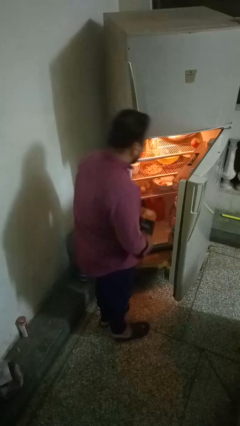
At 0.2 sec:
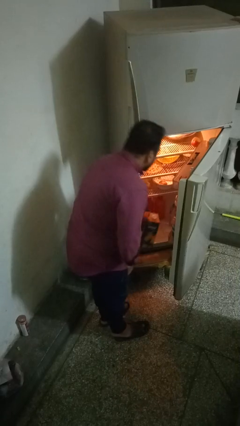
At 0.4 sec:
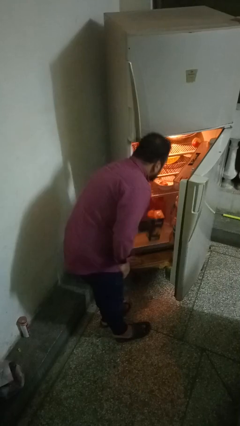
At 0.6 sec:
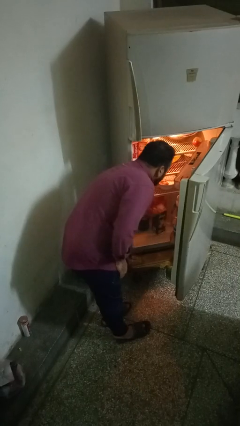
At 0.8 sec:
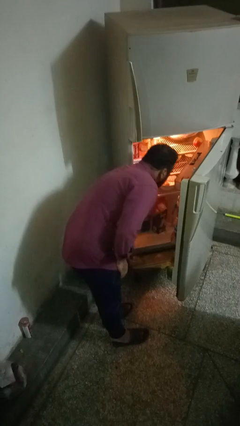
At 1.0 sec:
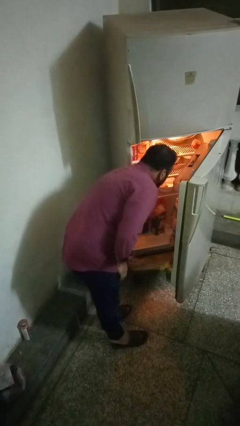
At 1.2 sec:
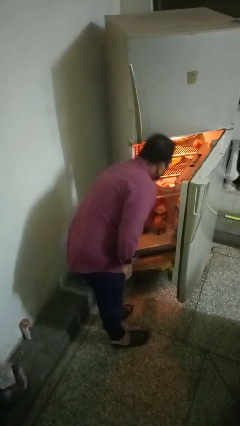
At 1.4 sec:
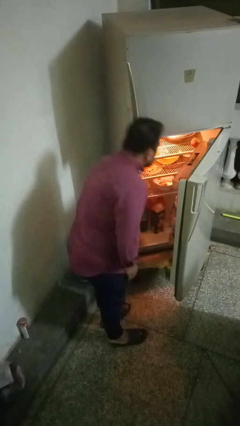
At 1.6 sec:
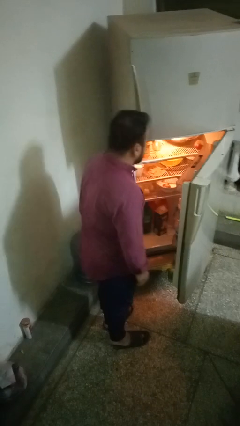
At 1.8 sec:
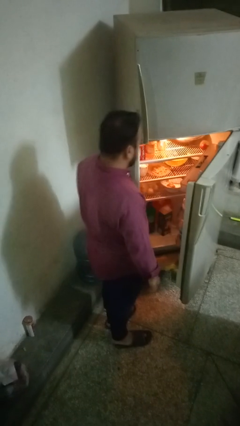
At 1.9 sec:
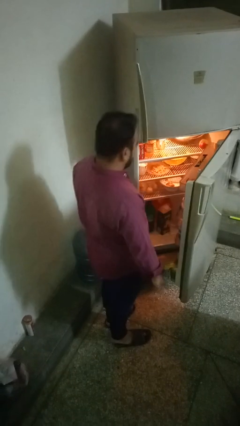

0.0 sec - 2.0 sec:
person puts object into refrigerator

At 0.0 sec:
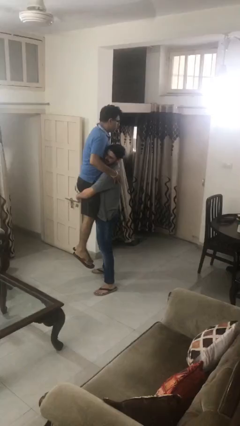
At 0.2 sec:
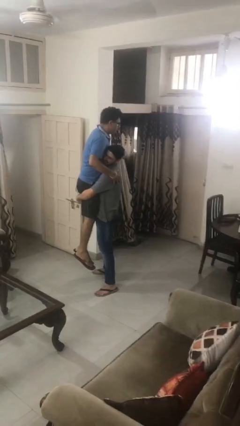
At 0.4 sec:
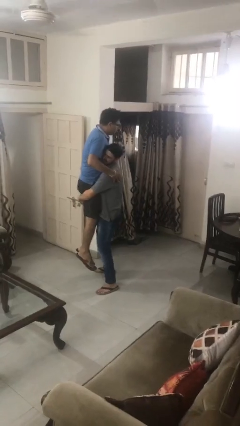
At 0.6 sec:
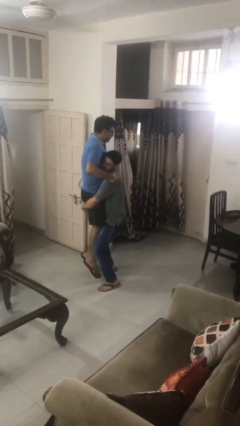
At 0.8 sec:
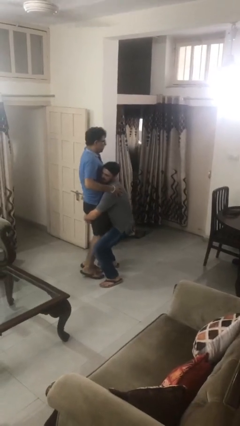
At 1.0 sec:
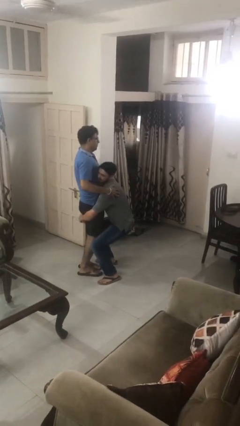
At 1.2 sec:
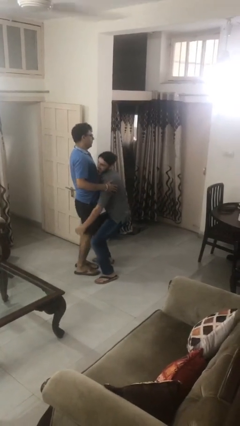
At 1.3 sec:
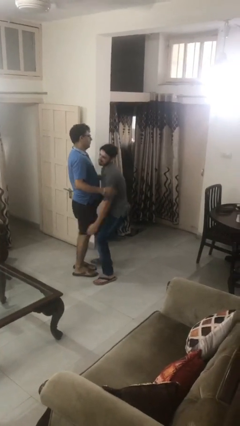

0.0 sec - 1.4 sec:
person puts down person

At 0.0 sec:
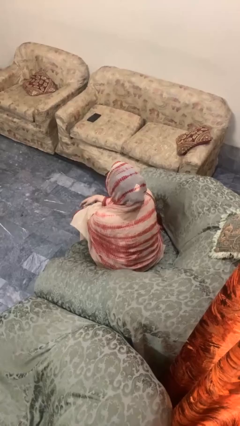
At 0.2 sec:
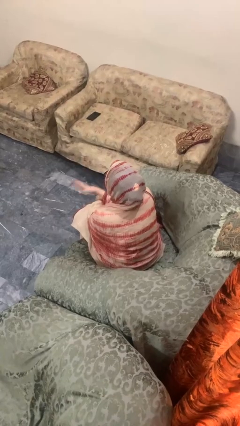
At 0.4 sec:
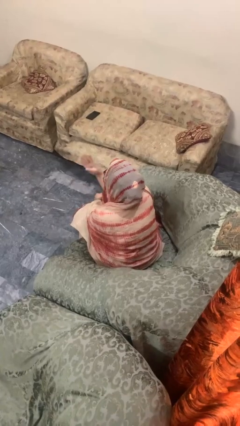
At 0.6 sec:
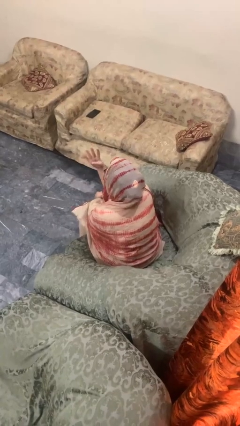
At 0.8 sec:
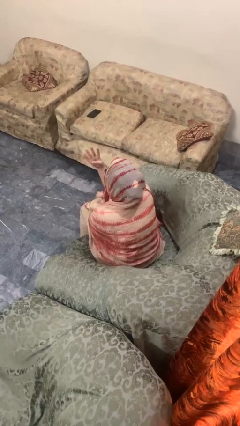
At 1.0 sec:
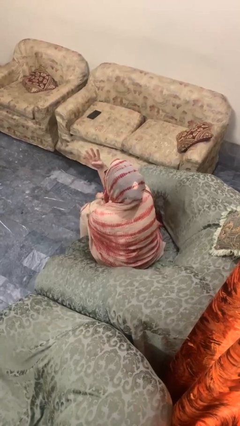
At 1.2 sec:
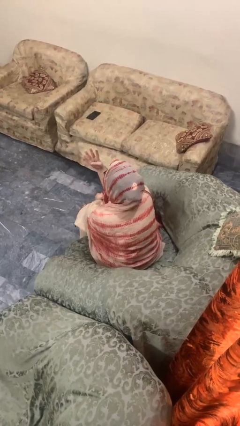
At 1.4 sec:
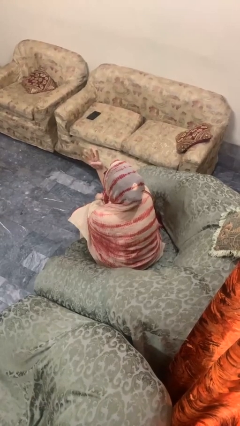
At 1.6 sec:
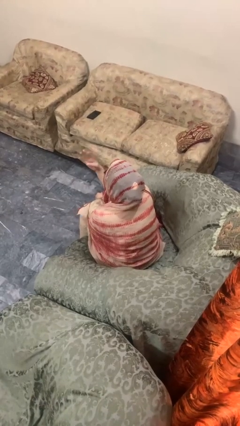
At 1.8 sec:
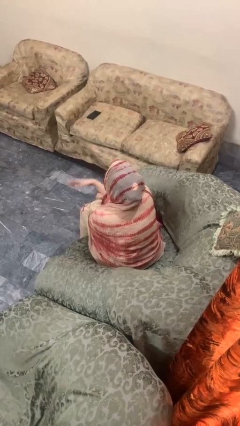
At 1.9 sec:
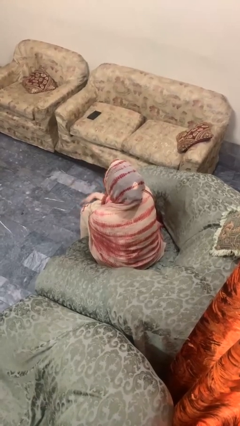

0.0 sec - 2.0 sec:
person gestures number four

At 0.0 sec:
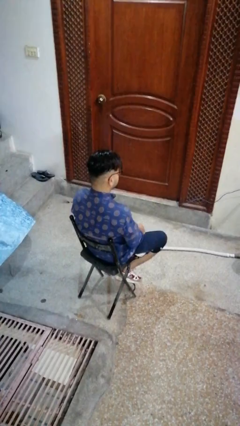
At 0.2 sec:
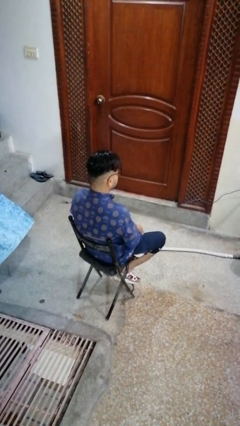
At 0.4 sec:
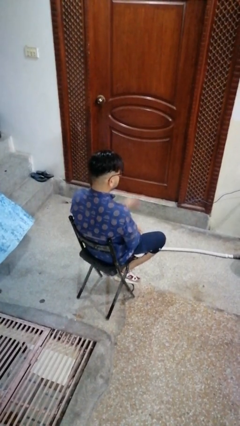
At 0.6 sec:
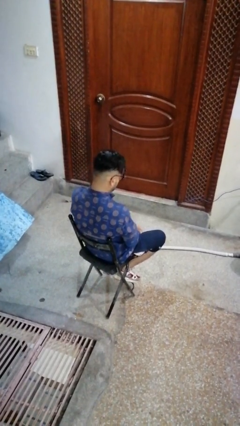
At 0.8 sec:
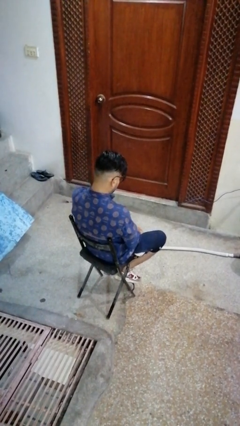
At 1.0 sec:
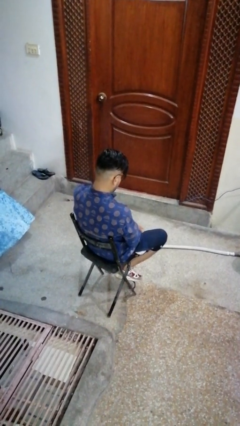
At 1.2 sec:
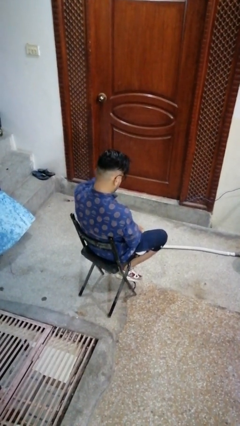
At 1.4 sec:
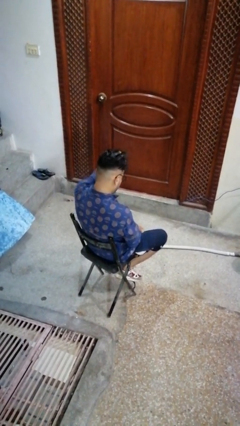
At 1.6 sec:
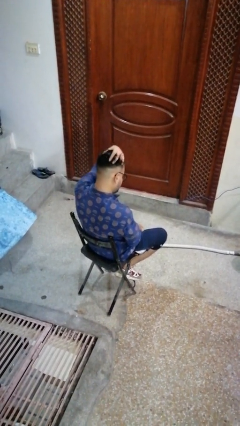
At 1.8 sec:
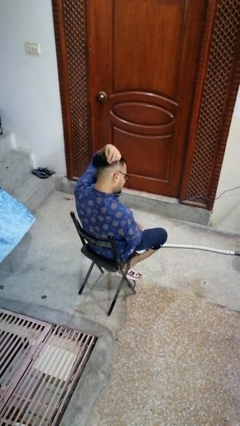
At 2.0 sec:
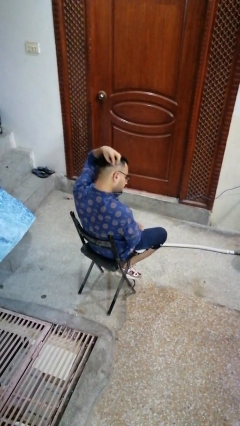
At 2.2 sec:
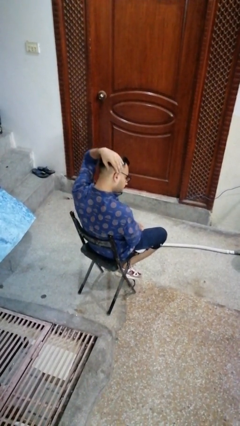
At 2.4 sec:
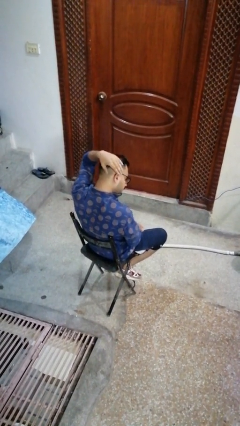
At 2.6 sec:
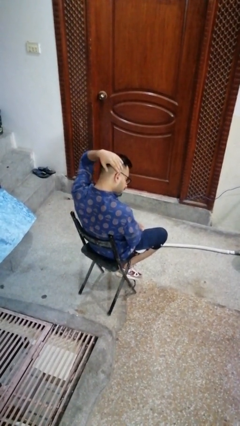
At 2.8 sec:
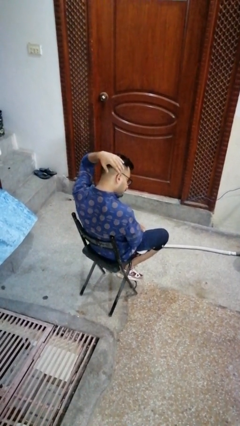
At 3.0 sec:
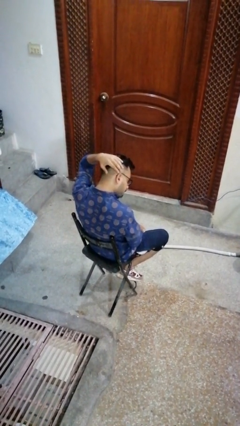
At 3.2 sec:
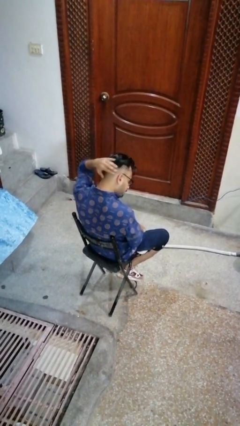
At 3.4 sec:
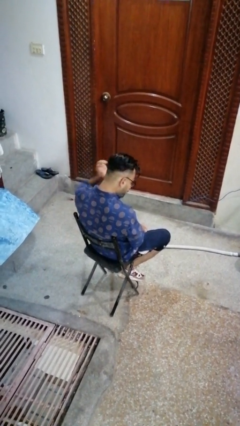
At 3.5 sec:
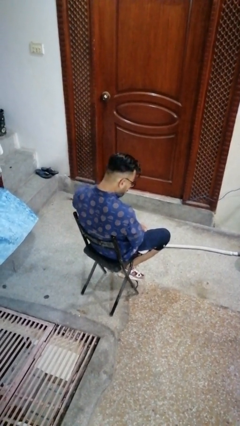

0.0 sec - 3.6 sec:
person strokes hair

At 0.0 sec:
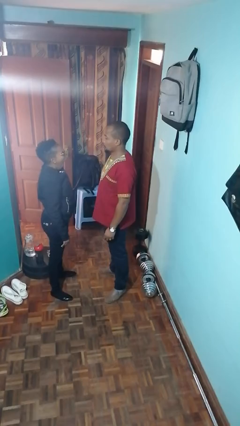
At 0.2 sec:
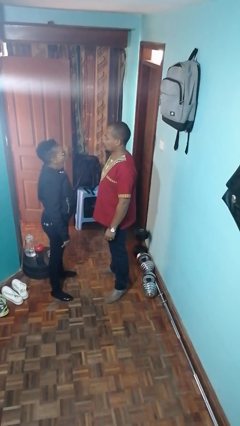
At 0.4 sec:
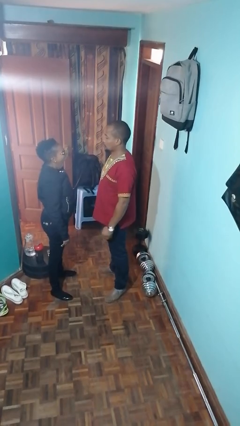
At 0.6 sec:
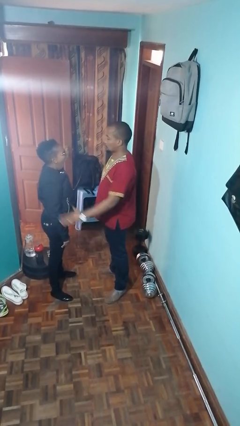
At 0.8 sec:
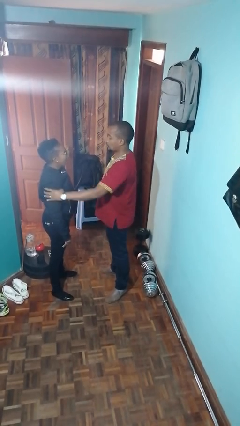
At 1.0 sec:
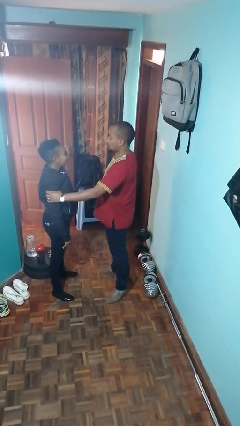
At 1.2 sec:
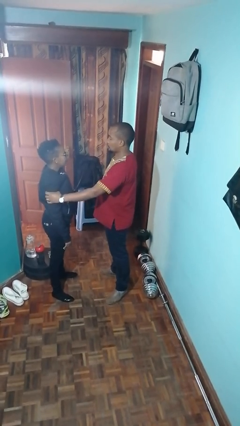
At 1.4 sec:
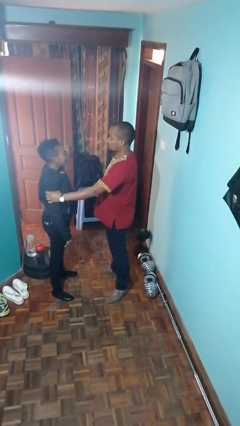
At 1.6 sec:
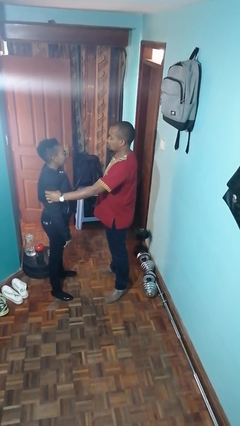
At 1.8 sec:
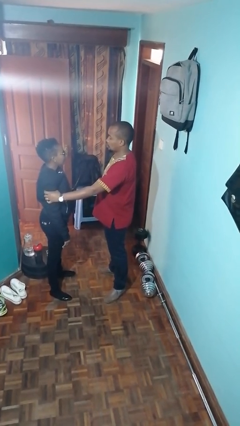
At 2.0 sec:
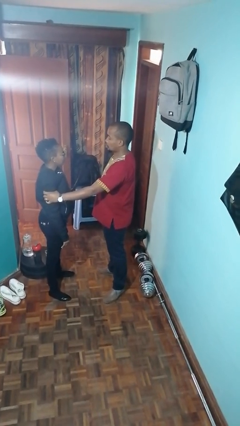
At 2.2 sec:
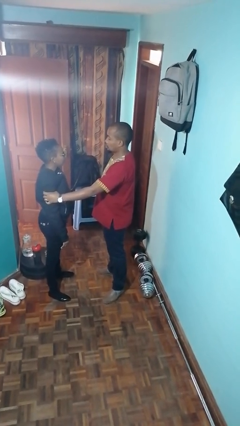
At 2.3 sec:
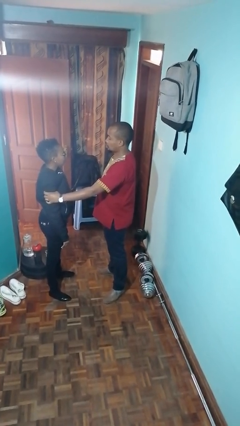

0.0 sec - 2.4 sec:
person grabs person by bicep

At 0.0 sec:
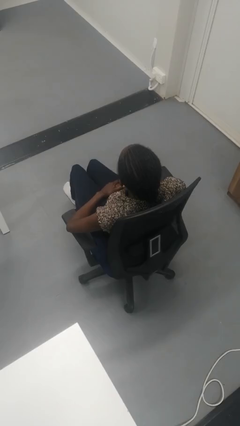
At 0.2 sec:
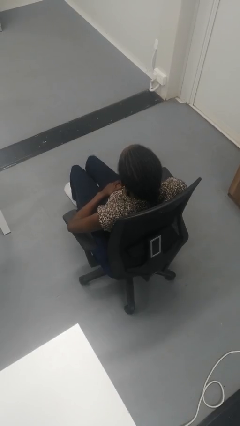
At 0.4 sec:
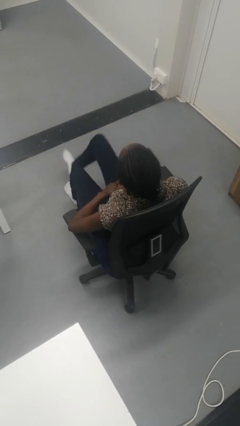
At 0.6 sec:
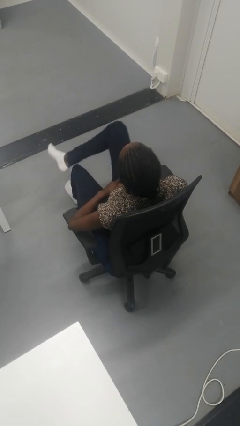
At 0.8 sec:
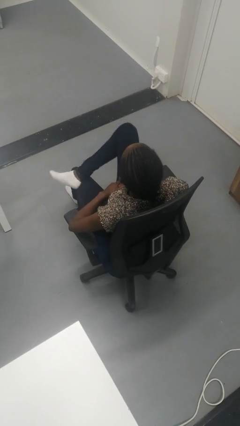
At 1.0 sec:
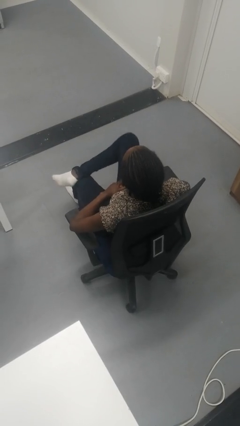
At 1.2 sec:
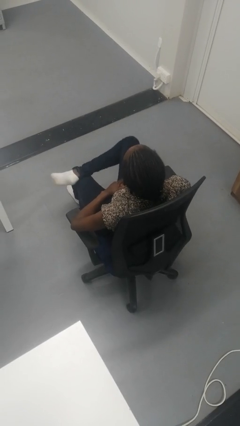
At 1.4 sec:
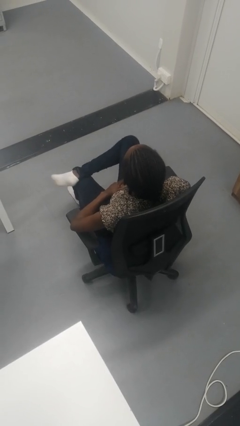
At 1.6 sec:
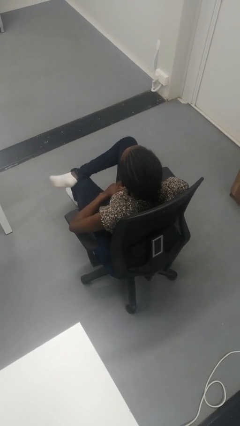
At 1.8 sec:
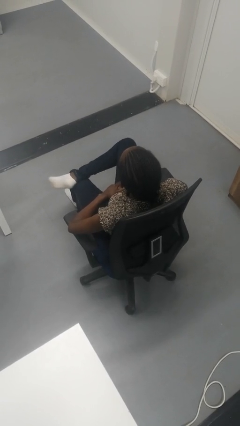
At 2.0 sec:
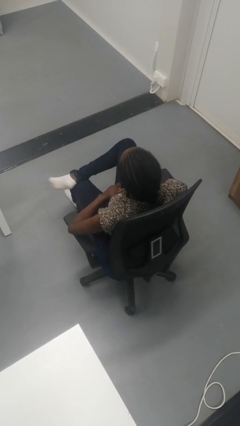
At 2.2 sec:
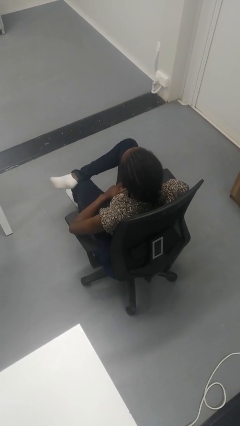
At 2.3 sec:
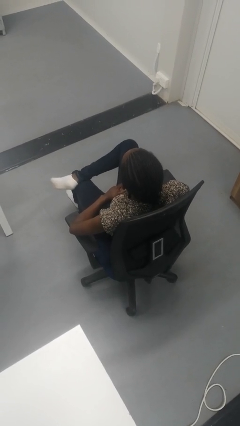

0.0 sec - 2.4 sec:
person crosses legs

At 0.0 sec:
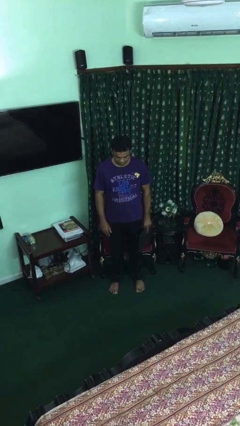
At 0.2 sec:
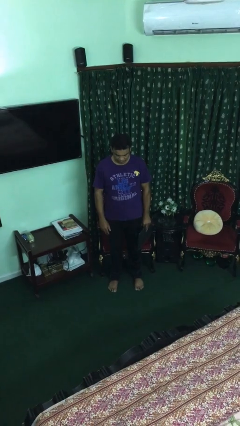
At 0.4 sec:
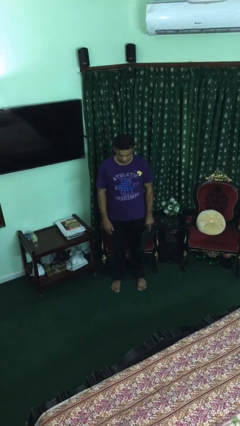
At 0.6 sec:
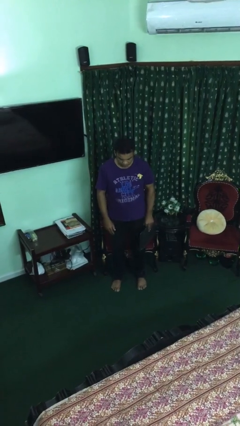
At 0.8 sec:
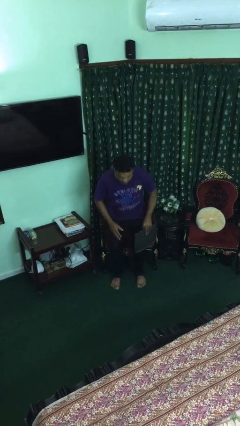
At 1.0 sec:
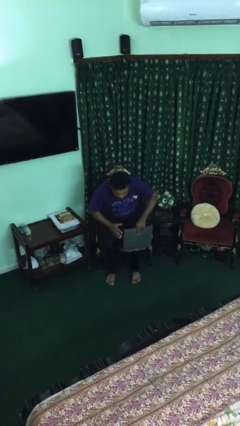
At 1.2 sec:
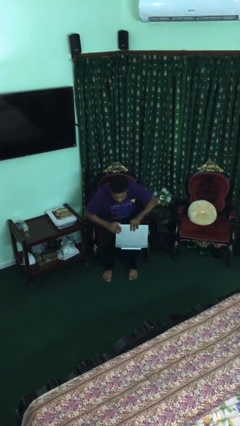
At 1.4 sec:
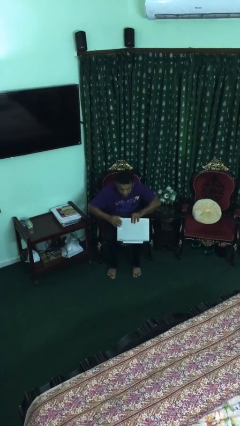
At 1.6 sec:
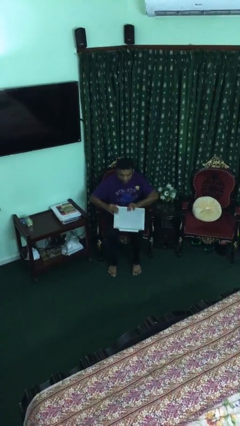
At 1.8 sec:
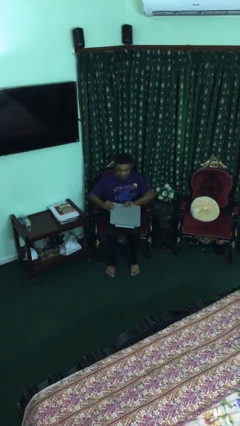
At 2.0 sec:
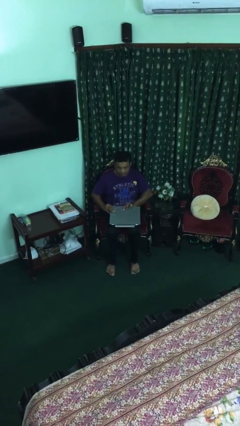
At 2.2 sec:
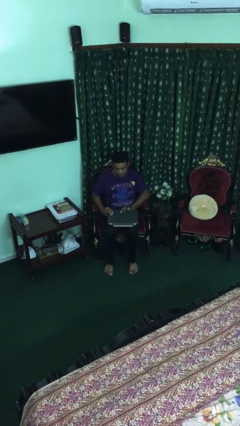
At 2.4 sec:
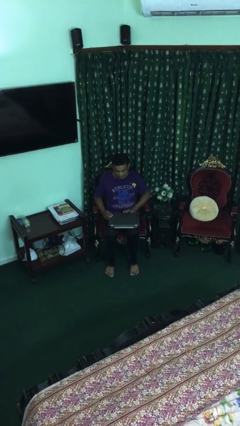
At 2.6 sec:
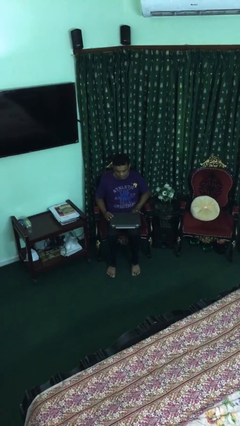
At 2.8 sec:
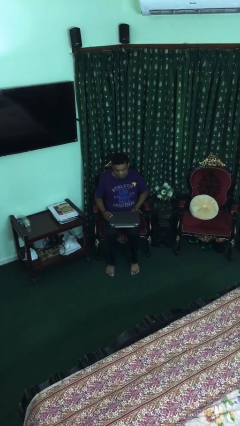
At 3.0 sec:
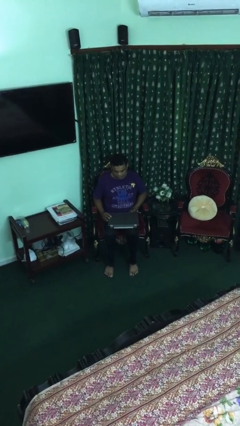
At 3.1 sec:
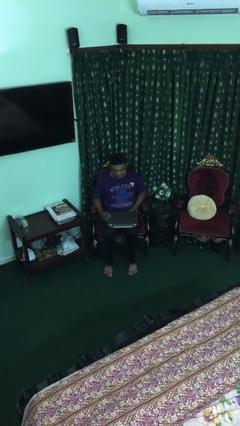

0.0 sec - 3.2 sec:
person sits down

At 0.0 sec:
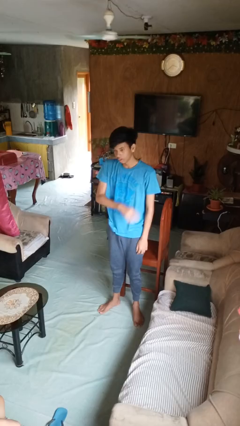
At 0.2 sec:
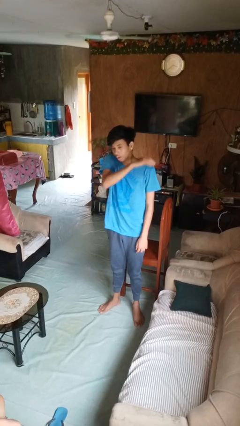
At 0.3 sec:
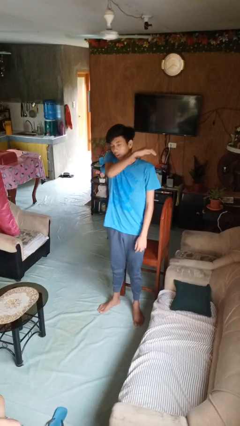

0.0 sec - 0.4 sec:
person sneezes into arm
